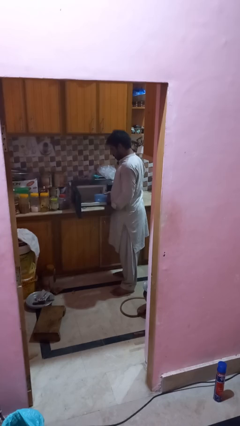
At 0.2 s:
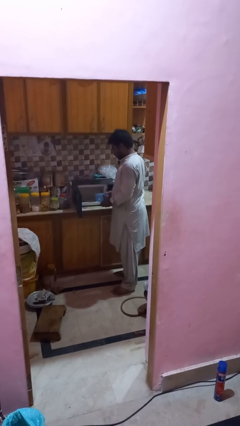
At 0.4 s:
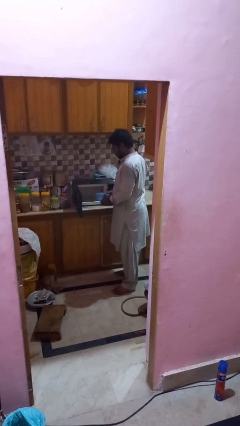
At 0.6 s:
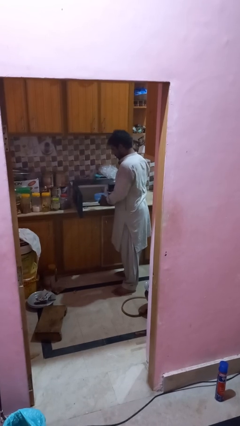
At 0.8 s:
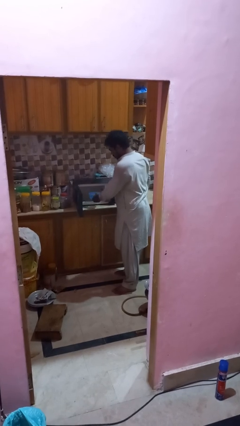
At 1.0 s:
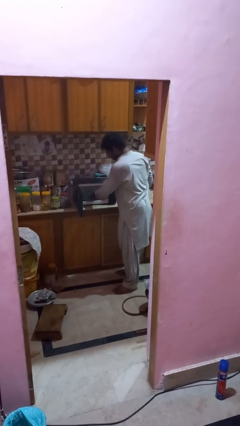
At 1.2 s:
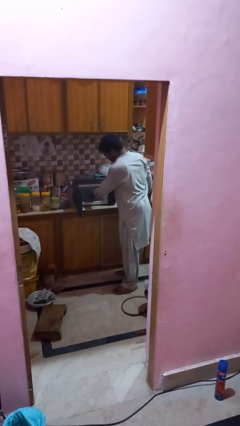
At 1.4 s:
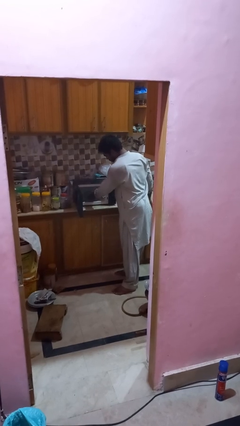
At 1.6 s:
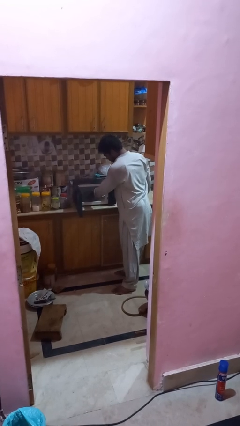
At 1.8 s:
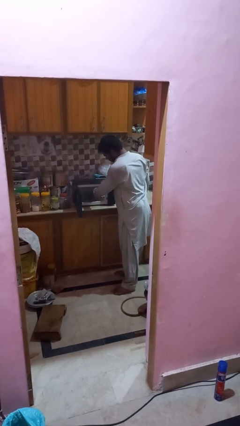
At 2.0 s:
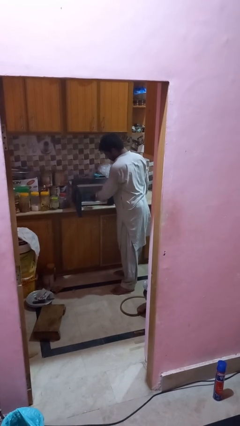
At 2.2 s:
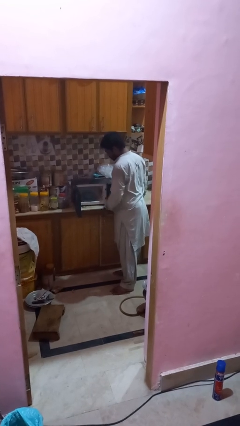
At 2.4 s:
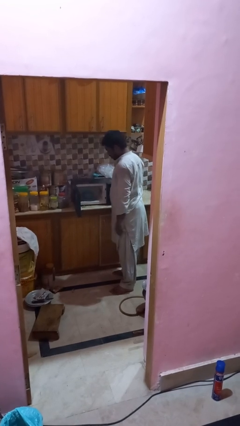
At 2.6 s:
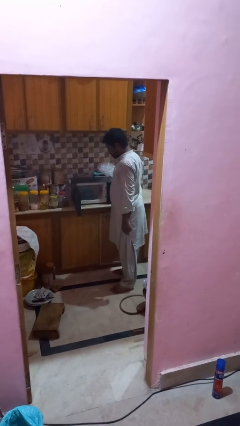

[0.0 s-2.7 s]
person puts object into microwave

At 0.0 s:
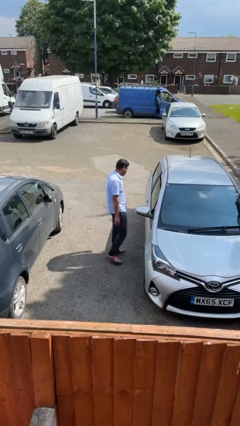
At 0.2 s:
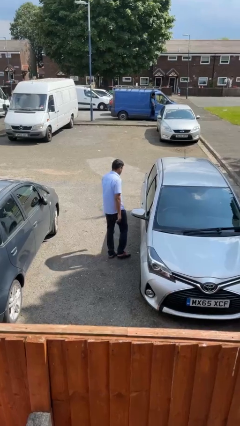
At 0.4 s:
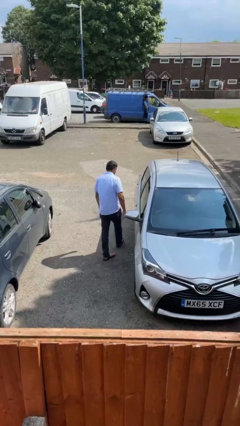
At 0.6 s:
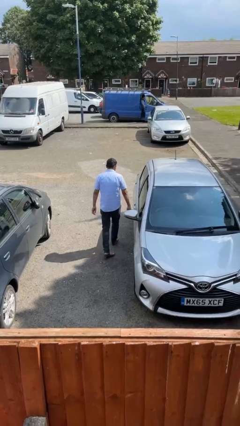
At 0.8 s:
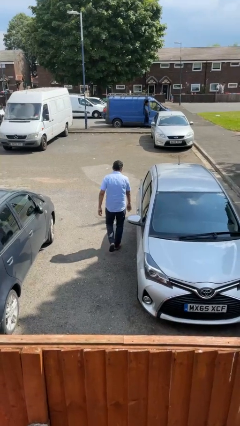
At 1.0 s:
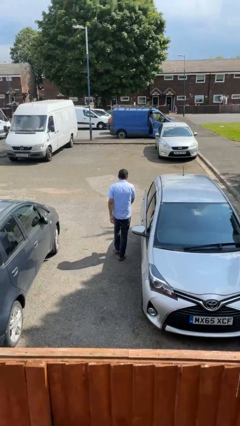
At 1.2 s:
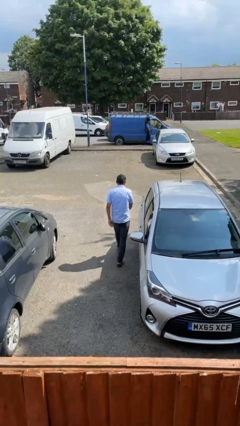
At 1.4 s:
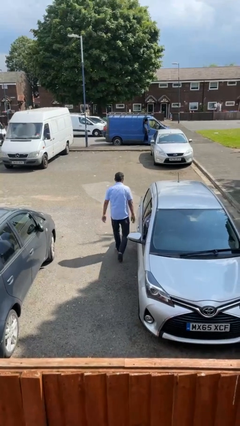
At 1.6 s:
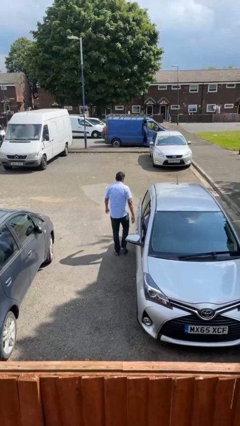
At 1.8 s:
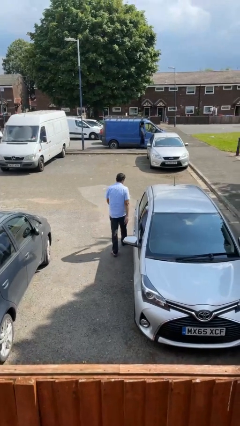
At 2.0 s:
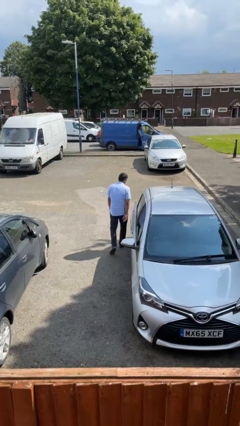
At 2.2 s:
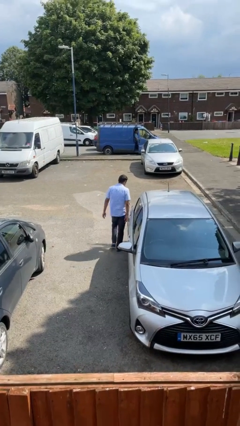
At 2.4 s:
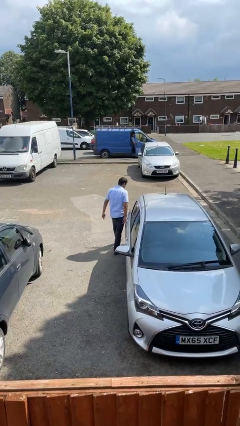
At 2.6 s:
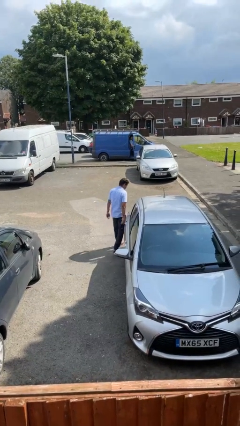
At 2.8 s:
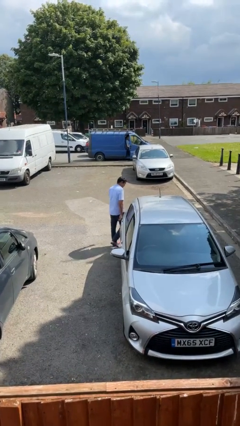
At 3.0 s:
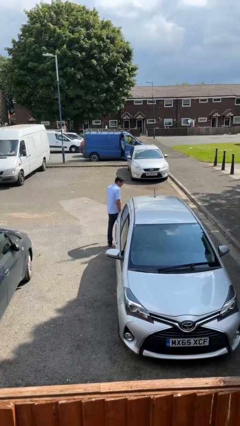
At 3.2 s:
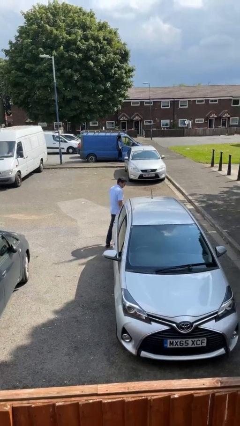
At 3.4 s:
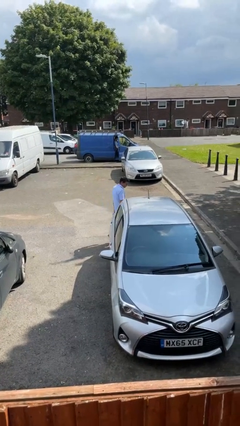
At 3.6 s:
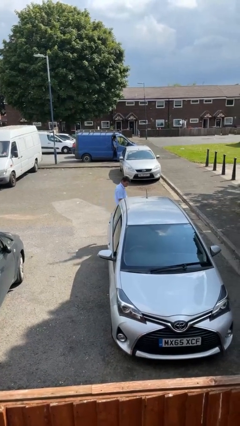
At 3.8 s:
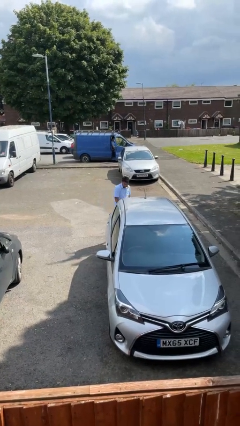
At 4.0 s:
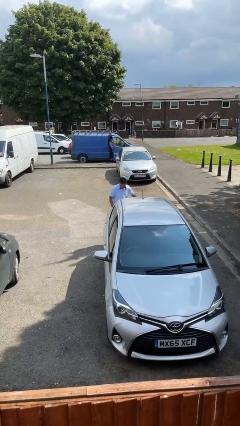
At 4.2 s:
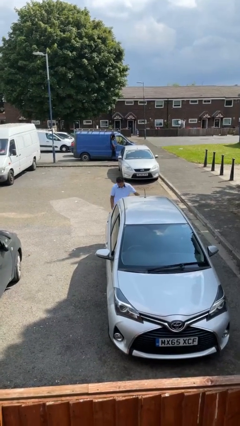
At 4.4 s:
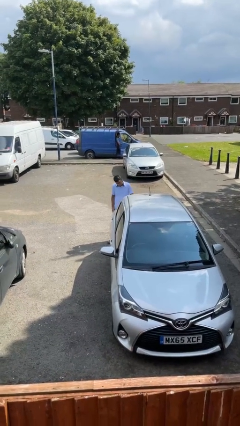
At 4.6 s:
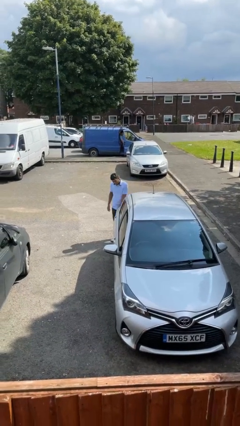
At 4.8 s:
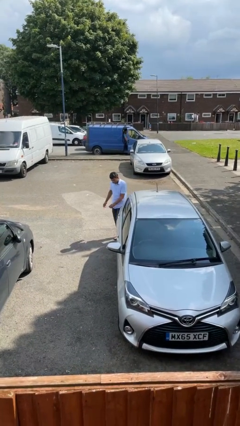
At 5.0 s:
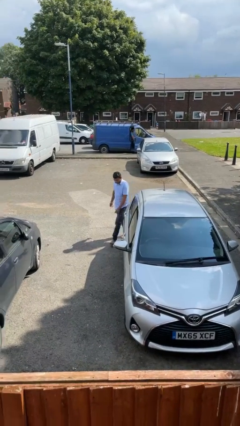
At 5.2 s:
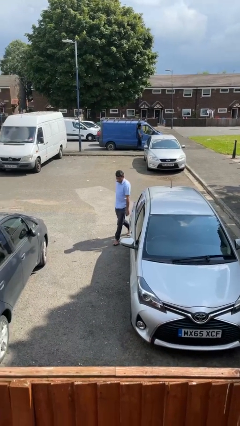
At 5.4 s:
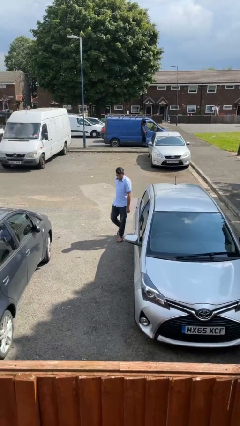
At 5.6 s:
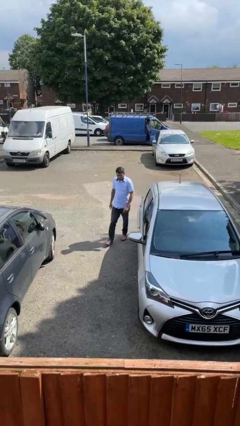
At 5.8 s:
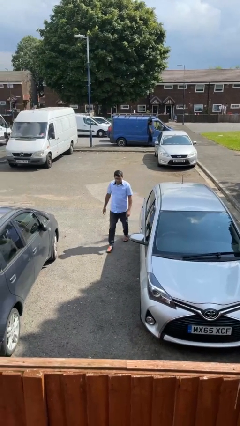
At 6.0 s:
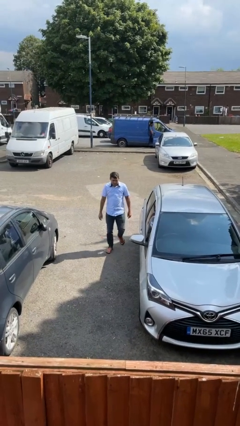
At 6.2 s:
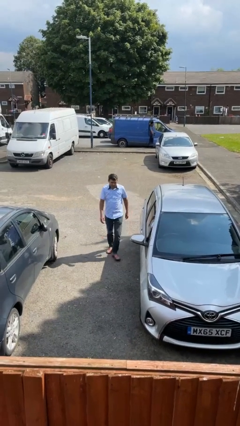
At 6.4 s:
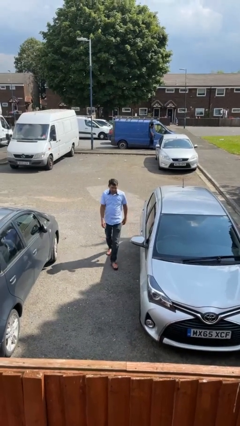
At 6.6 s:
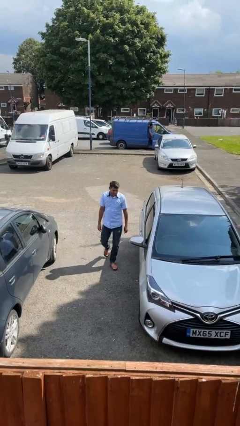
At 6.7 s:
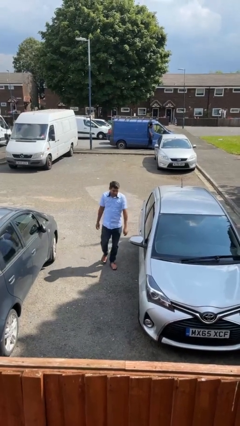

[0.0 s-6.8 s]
person walks around car

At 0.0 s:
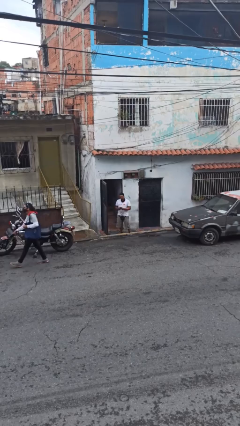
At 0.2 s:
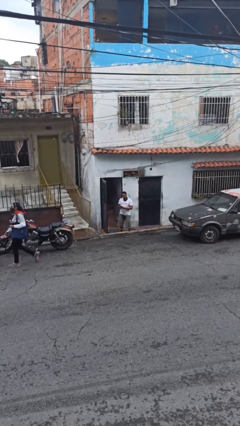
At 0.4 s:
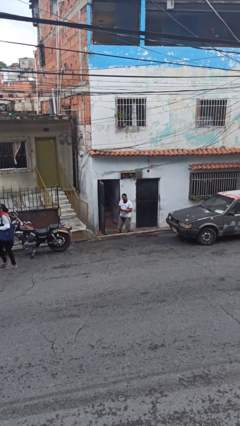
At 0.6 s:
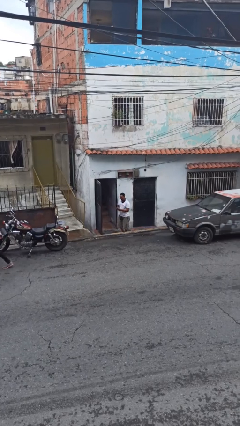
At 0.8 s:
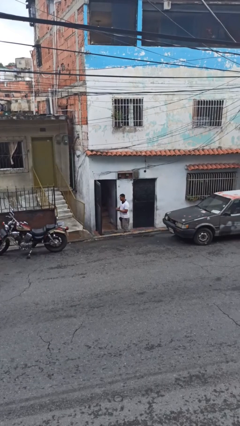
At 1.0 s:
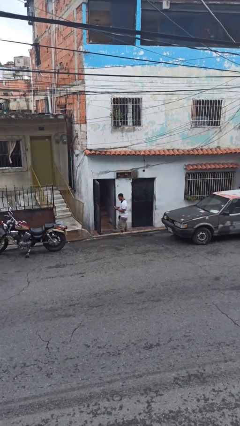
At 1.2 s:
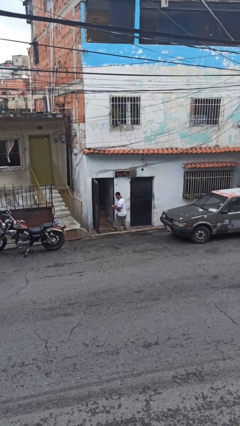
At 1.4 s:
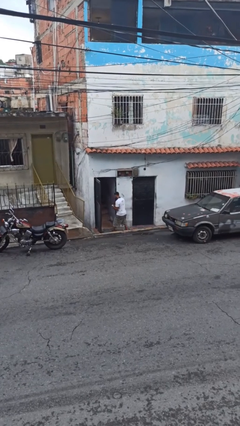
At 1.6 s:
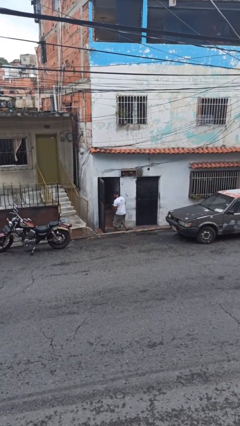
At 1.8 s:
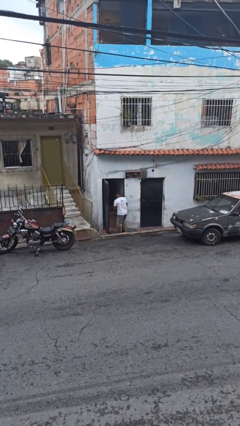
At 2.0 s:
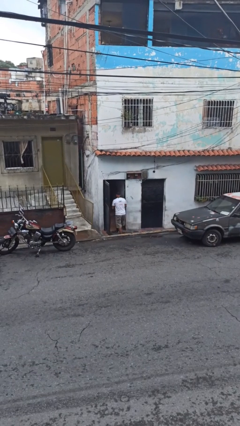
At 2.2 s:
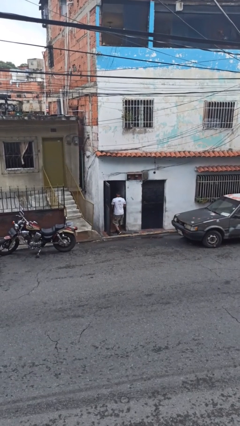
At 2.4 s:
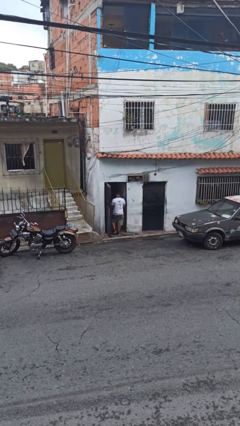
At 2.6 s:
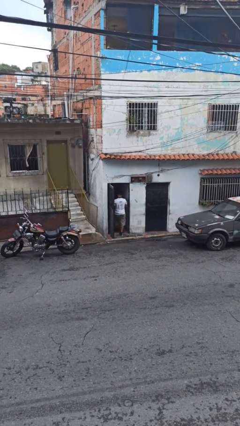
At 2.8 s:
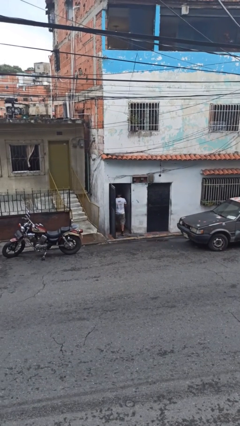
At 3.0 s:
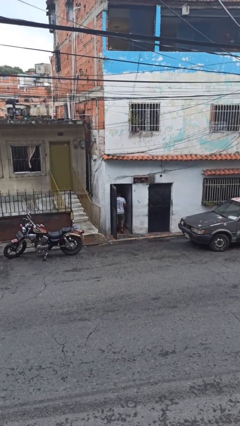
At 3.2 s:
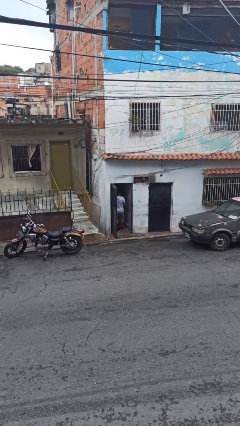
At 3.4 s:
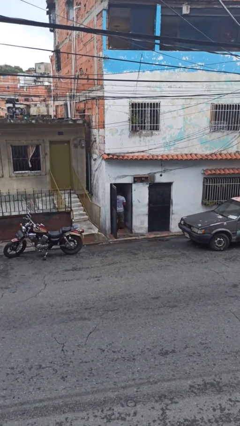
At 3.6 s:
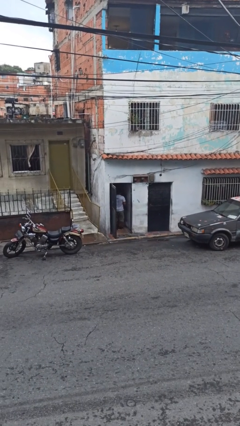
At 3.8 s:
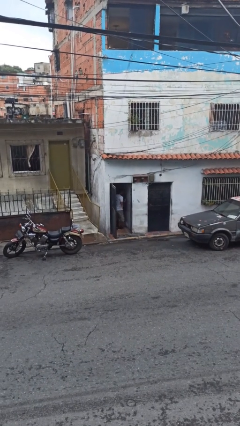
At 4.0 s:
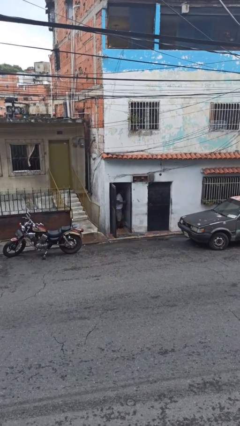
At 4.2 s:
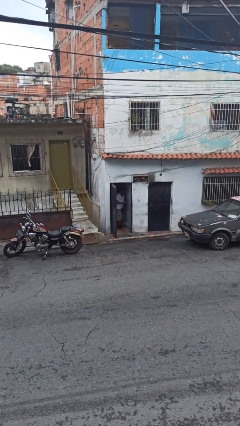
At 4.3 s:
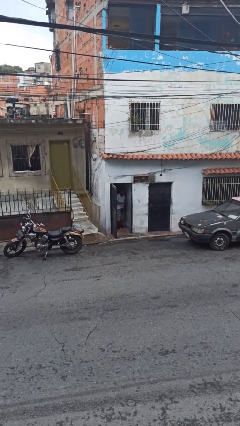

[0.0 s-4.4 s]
person exits scene through structure

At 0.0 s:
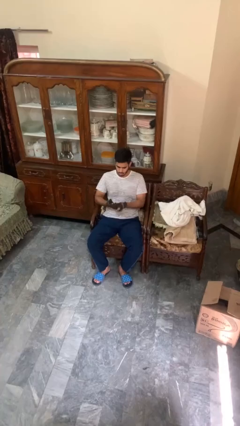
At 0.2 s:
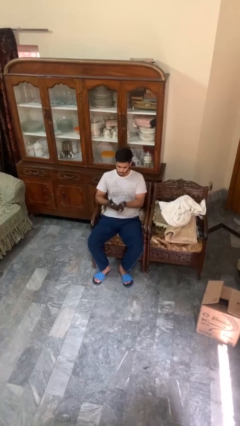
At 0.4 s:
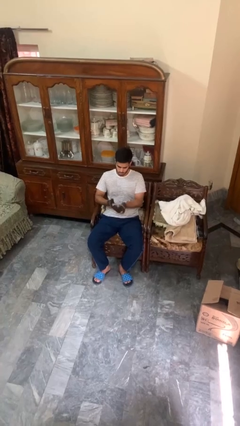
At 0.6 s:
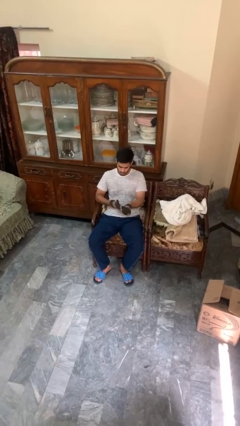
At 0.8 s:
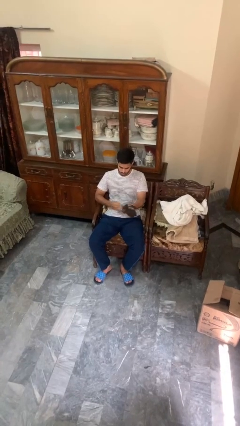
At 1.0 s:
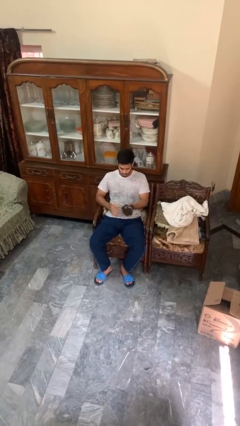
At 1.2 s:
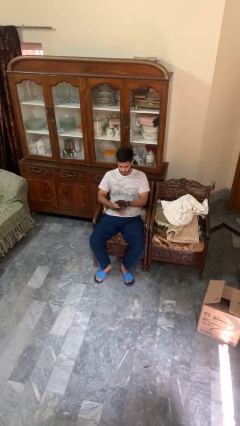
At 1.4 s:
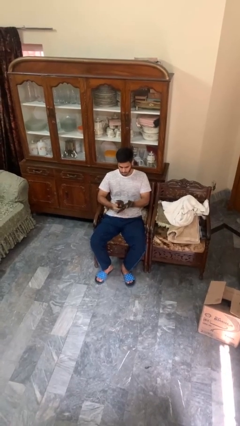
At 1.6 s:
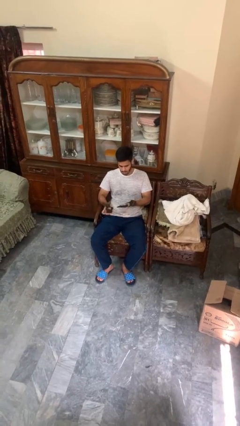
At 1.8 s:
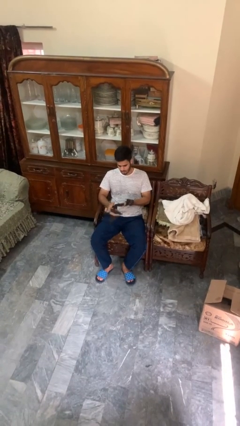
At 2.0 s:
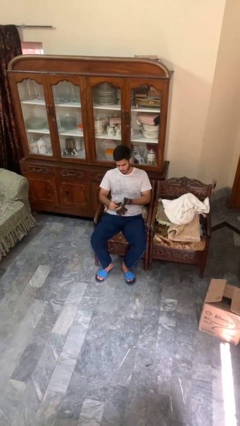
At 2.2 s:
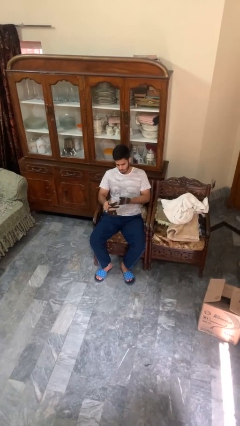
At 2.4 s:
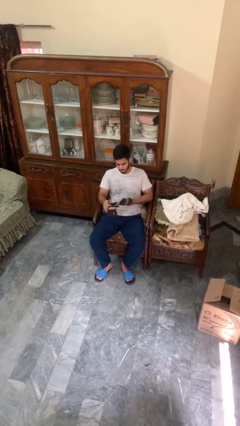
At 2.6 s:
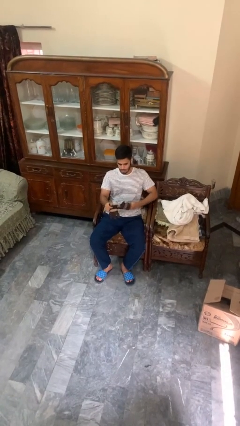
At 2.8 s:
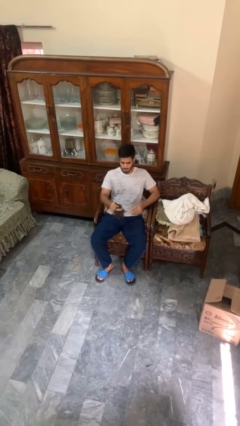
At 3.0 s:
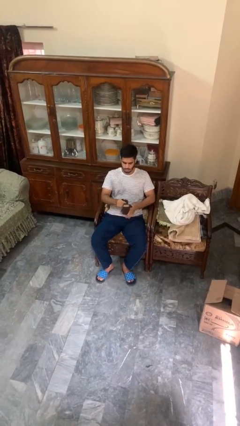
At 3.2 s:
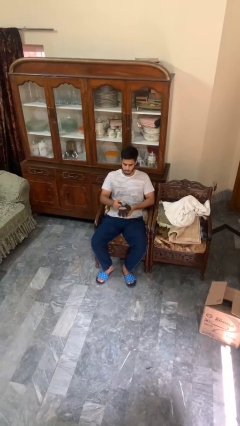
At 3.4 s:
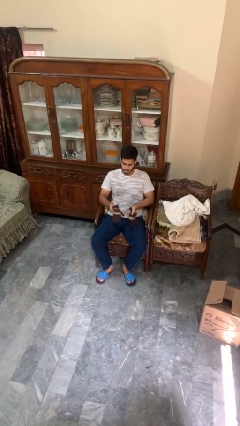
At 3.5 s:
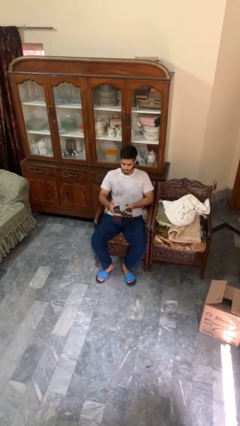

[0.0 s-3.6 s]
person takes off gloves

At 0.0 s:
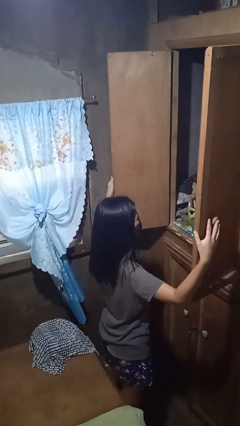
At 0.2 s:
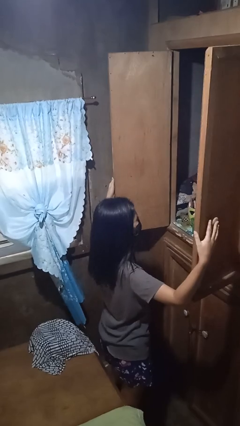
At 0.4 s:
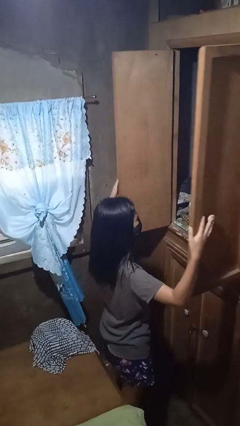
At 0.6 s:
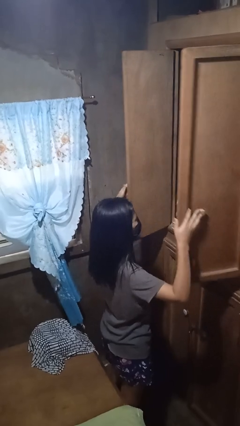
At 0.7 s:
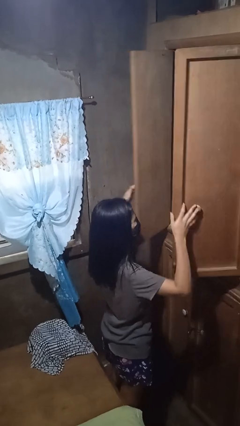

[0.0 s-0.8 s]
person closes closet door
